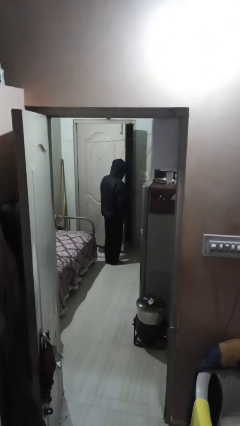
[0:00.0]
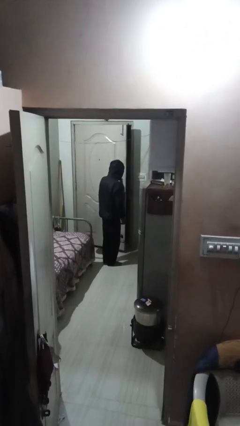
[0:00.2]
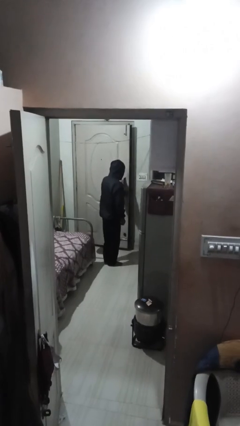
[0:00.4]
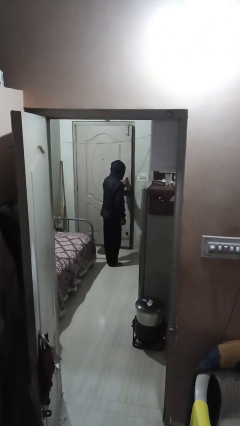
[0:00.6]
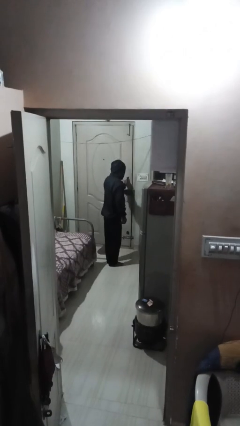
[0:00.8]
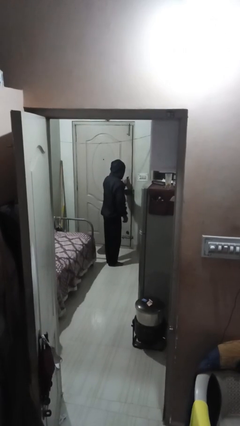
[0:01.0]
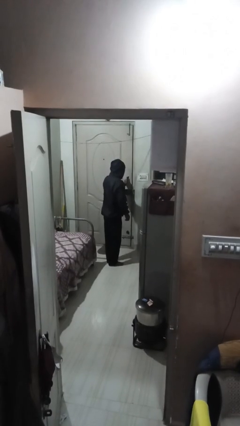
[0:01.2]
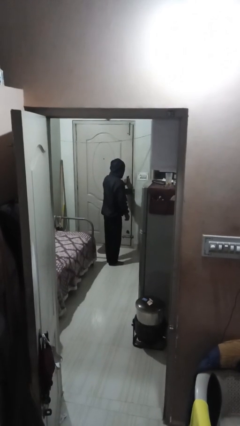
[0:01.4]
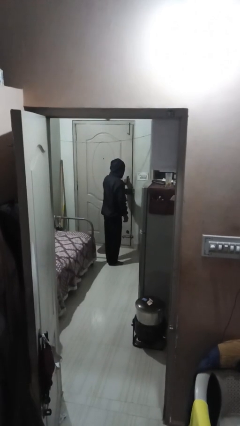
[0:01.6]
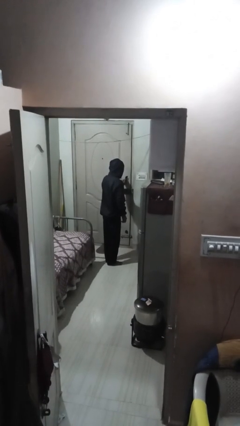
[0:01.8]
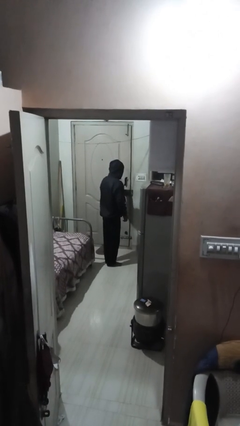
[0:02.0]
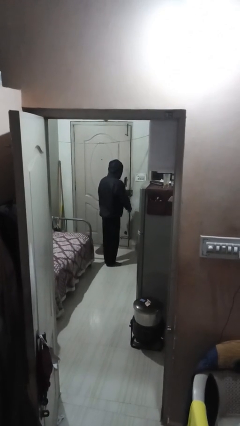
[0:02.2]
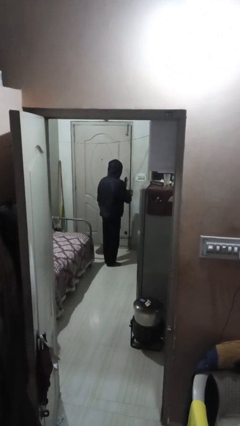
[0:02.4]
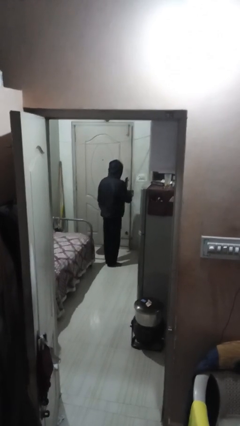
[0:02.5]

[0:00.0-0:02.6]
person closes facility door

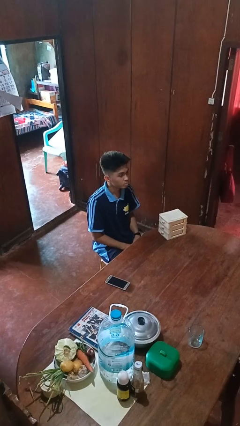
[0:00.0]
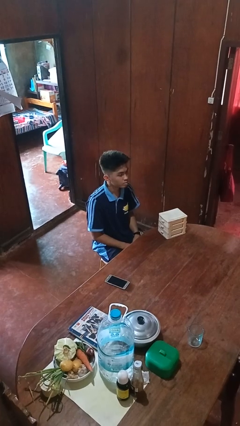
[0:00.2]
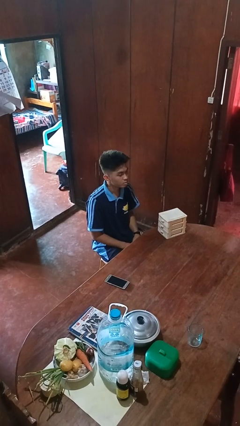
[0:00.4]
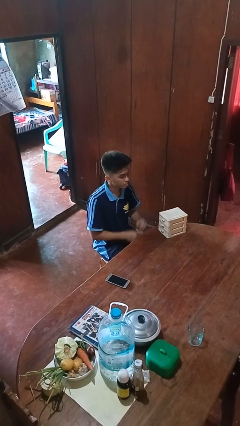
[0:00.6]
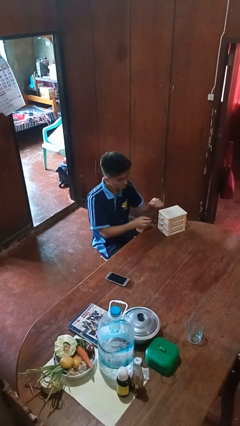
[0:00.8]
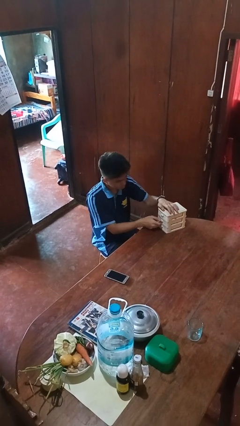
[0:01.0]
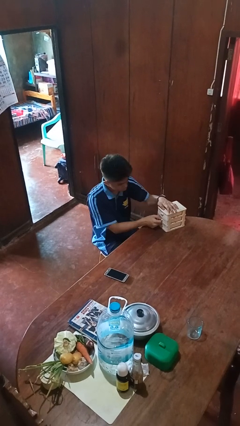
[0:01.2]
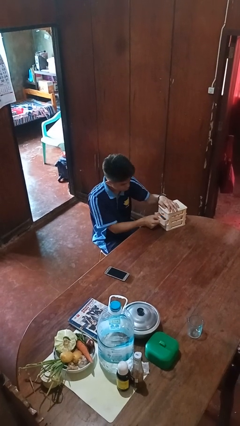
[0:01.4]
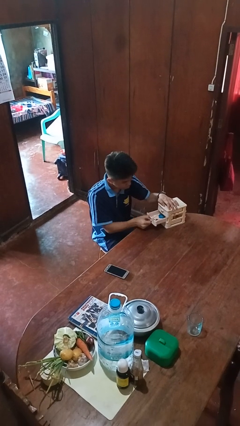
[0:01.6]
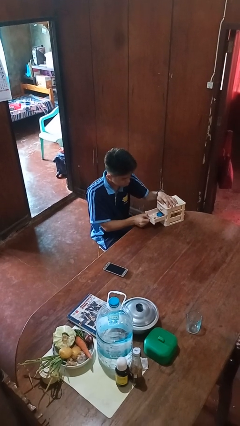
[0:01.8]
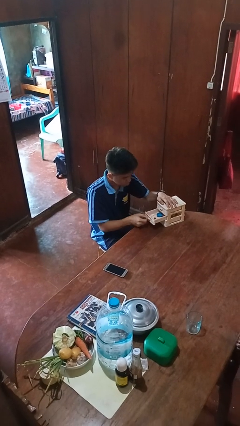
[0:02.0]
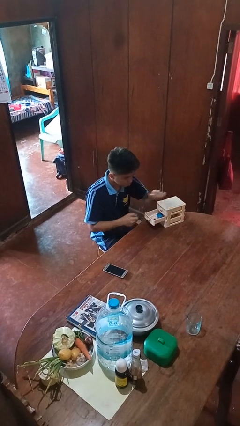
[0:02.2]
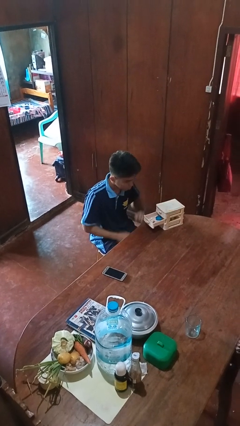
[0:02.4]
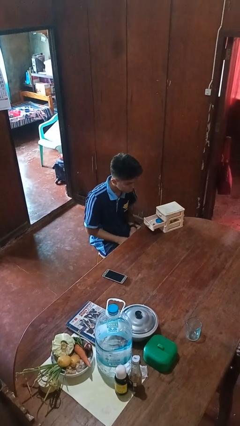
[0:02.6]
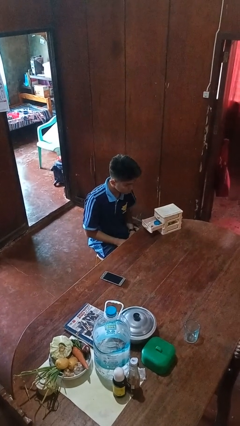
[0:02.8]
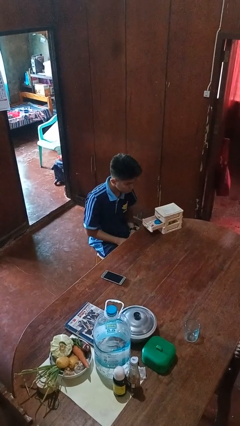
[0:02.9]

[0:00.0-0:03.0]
person opens jewelry box

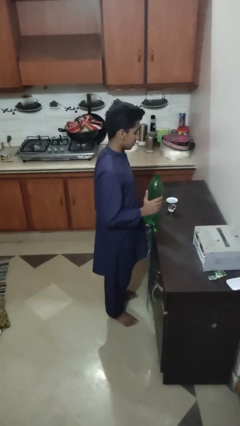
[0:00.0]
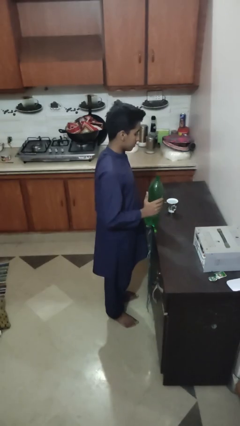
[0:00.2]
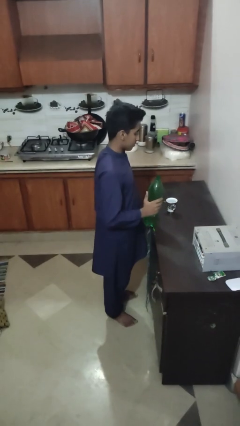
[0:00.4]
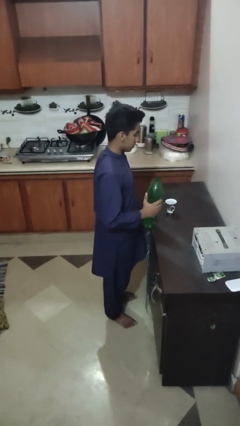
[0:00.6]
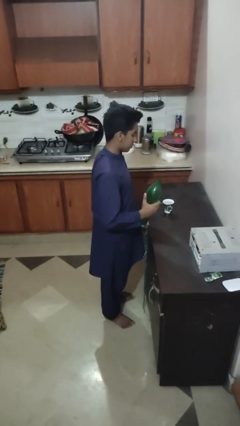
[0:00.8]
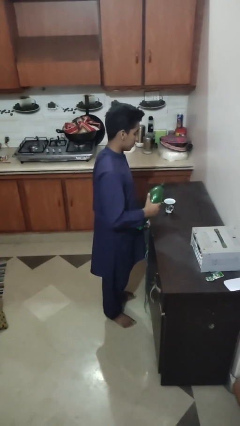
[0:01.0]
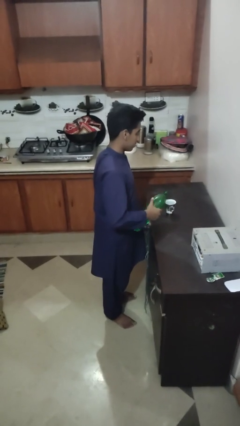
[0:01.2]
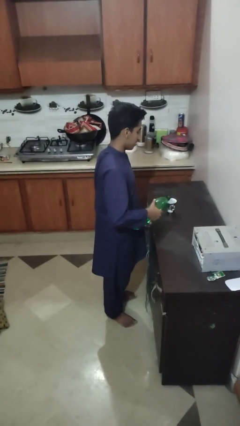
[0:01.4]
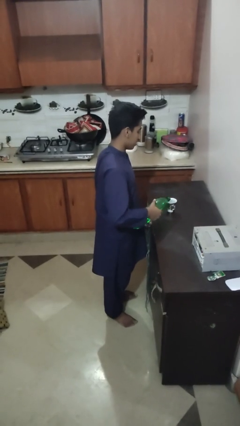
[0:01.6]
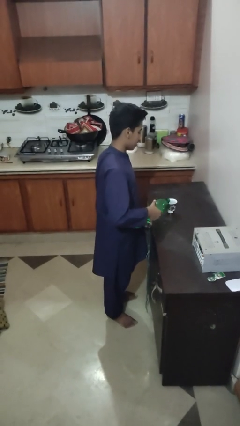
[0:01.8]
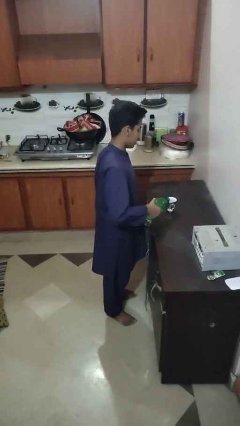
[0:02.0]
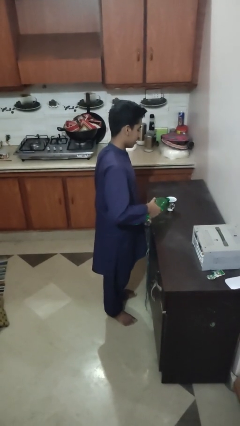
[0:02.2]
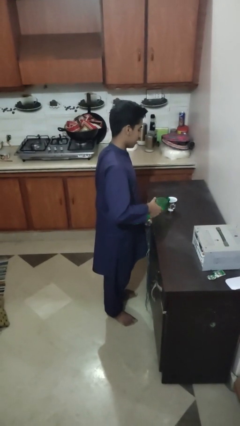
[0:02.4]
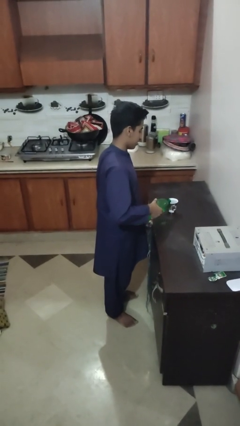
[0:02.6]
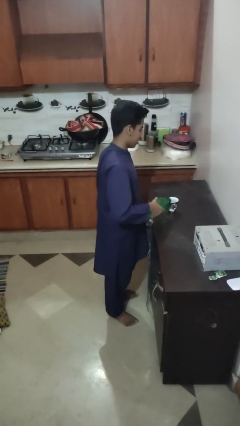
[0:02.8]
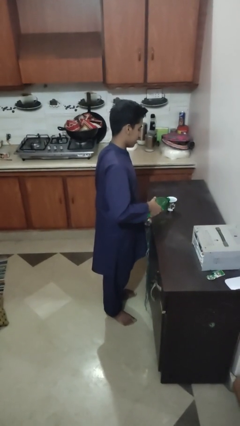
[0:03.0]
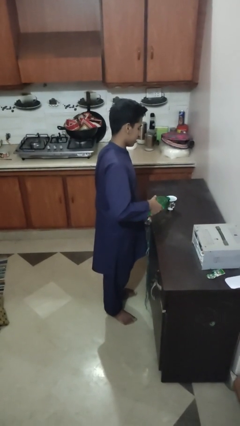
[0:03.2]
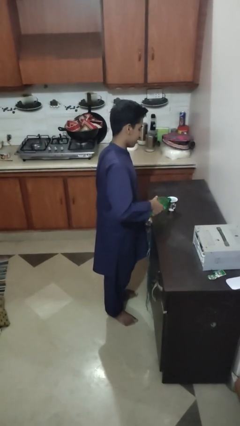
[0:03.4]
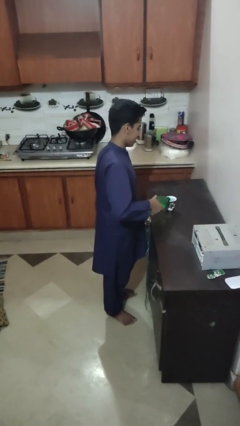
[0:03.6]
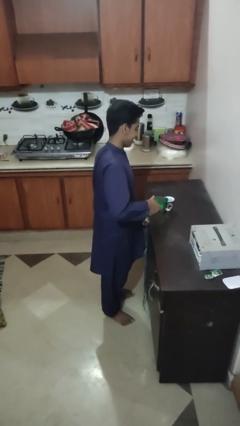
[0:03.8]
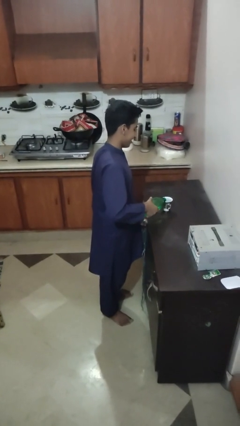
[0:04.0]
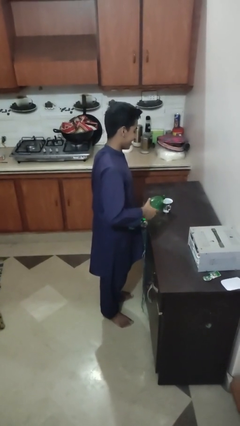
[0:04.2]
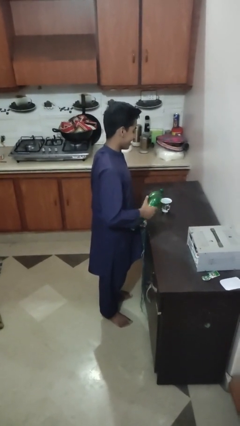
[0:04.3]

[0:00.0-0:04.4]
person pours liquid into cup

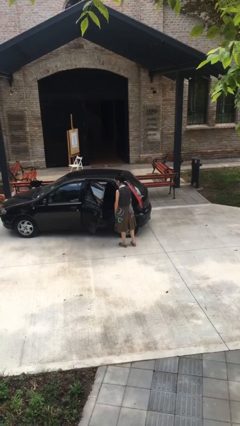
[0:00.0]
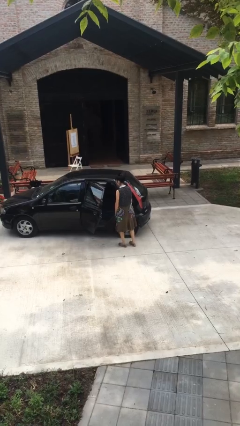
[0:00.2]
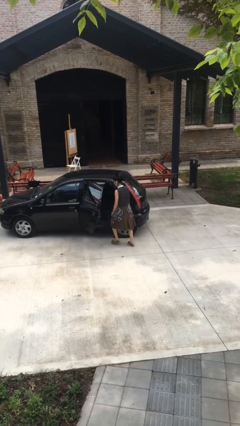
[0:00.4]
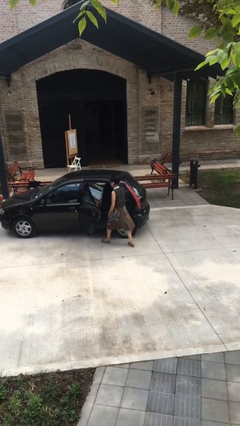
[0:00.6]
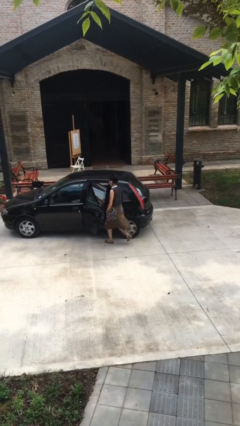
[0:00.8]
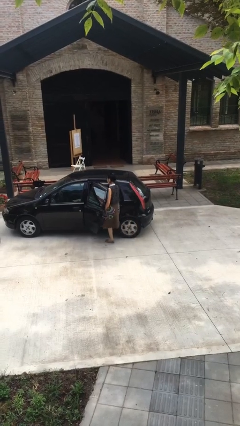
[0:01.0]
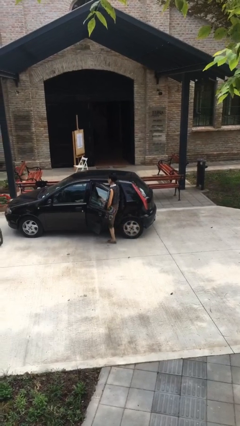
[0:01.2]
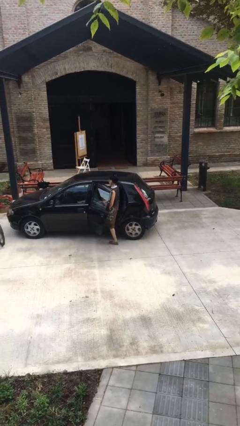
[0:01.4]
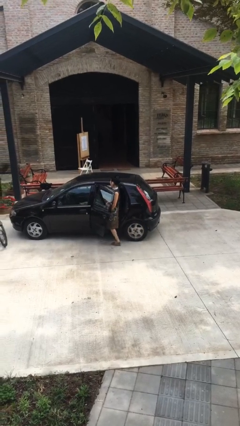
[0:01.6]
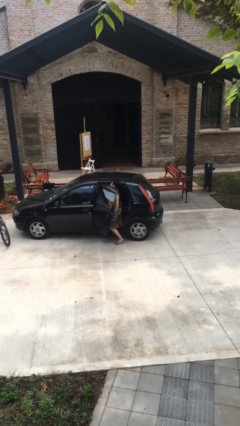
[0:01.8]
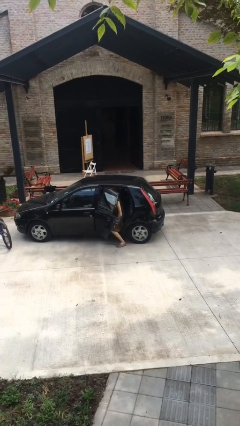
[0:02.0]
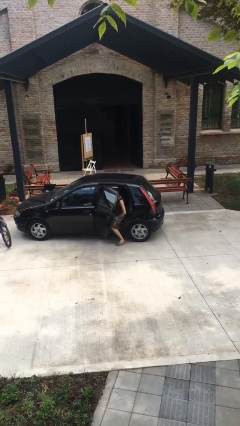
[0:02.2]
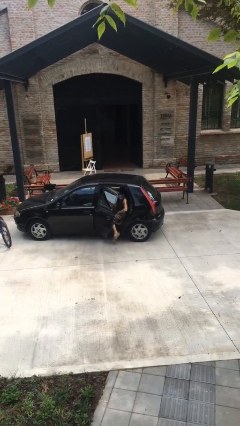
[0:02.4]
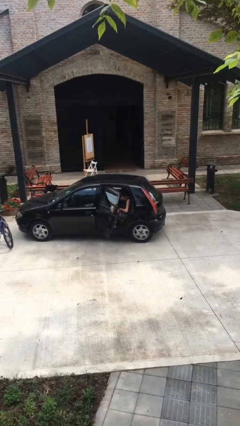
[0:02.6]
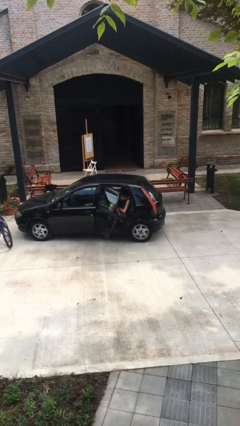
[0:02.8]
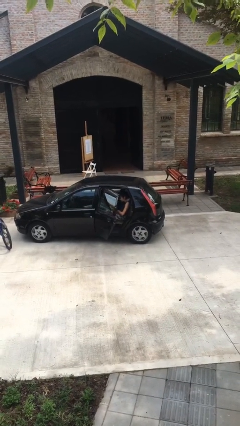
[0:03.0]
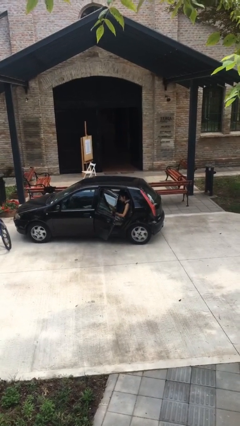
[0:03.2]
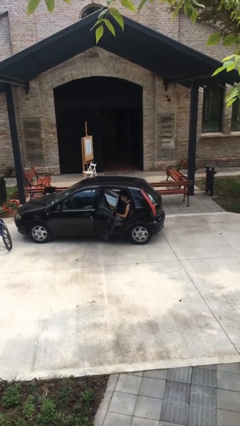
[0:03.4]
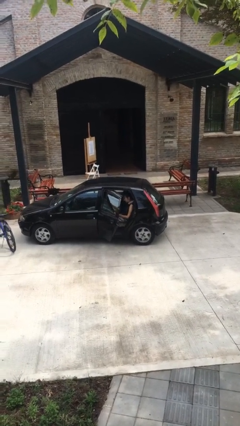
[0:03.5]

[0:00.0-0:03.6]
person enters car

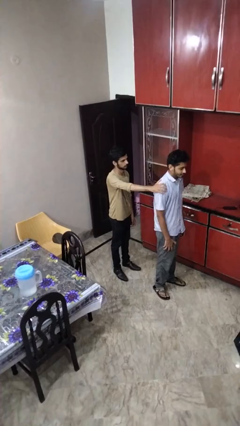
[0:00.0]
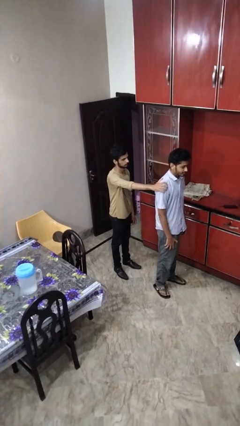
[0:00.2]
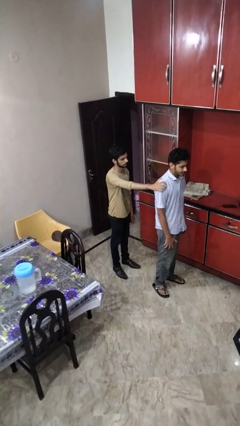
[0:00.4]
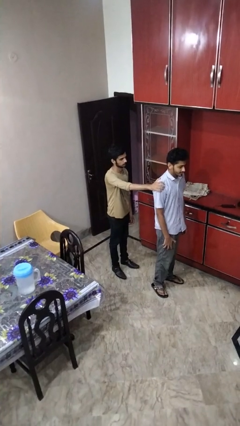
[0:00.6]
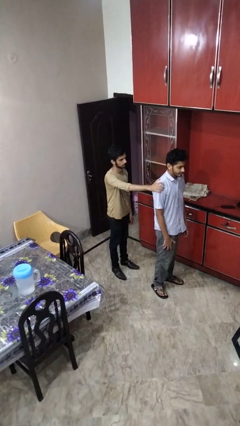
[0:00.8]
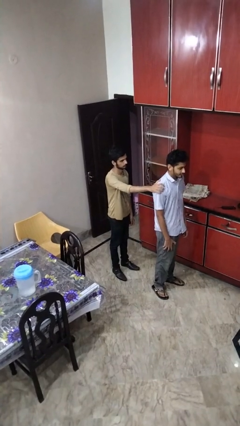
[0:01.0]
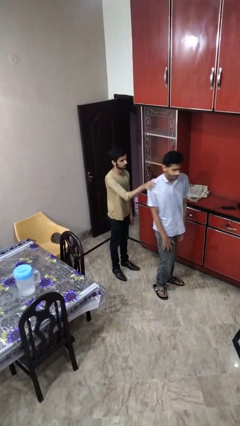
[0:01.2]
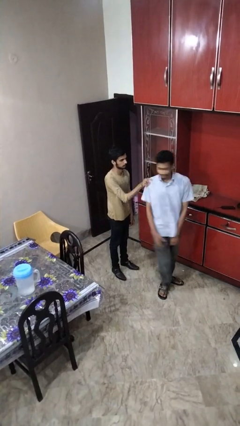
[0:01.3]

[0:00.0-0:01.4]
person grabs person by shoulder

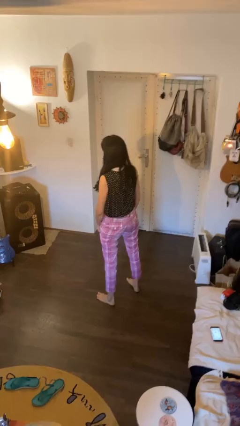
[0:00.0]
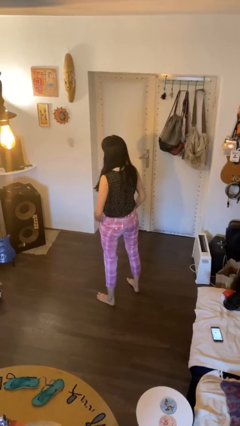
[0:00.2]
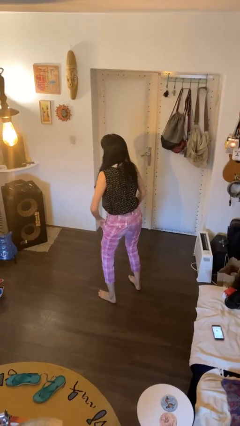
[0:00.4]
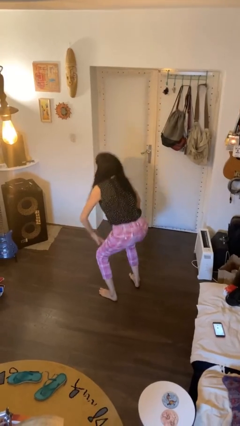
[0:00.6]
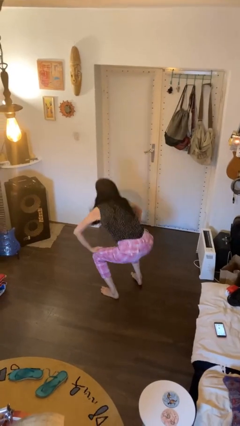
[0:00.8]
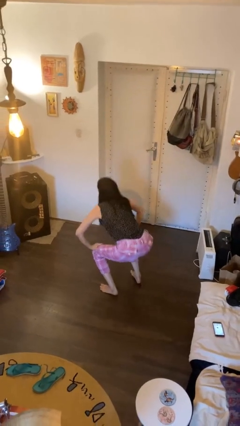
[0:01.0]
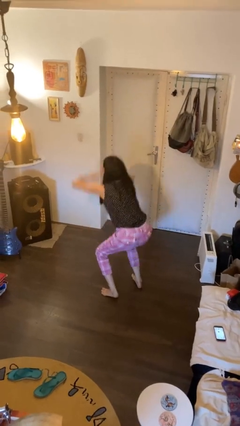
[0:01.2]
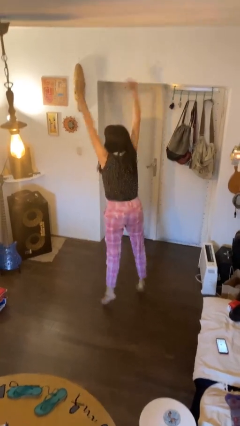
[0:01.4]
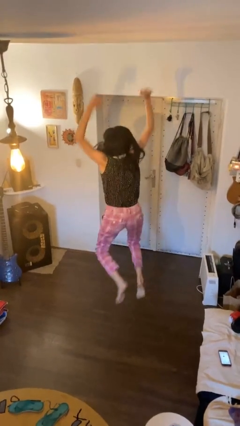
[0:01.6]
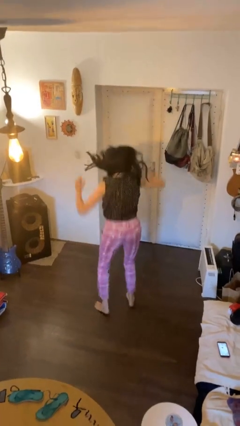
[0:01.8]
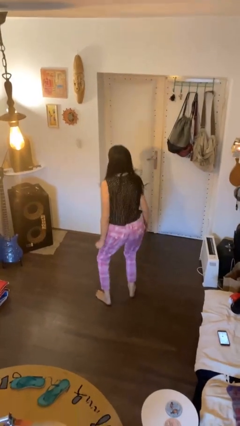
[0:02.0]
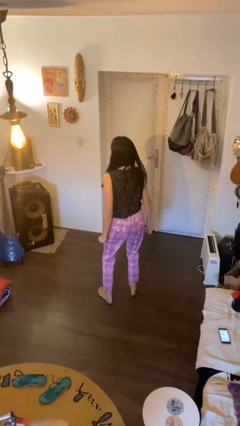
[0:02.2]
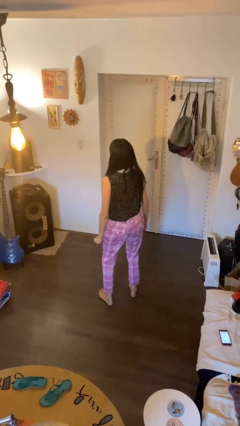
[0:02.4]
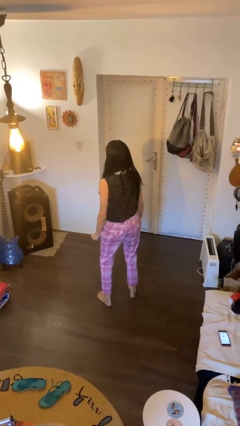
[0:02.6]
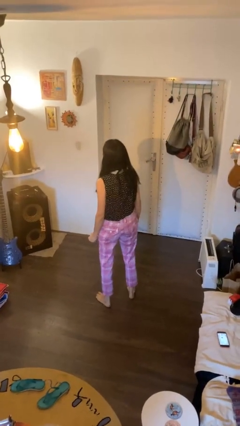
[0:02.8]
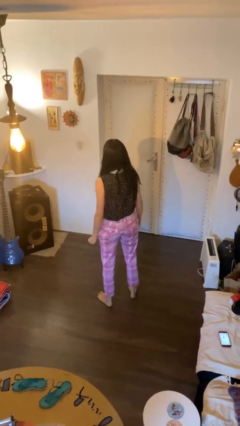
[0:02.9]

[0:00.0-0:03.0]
person jumps
